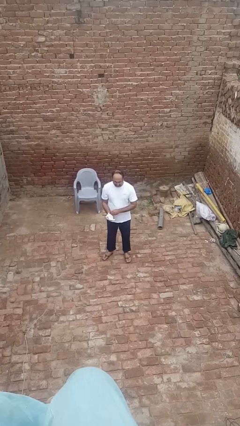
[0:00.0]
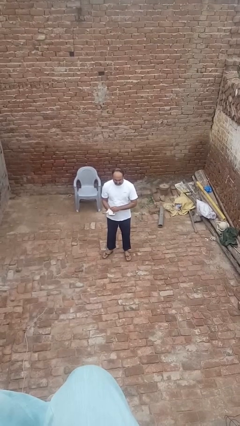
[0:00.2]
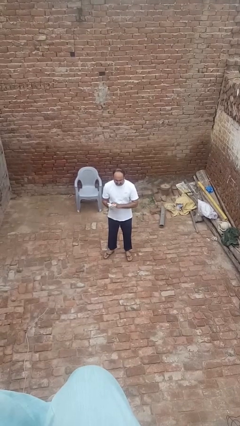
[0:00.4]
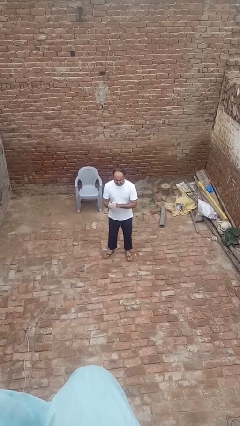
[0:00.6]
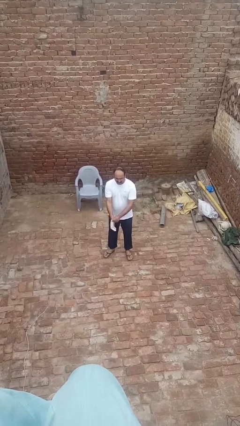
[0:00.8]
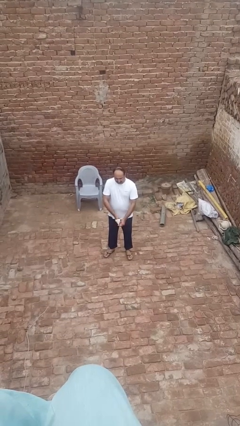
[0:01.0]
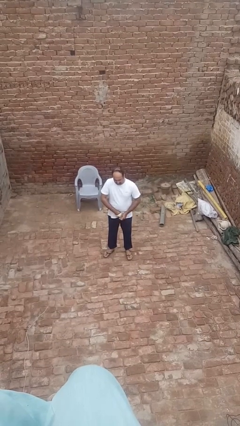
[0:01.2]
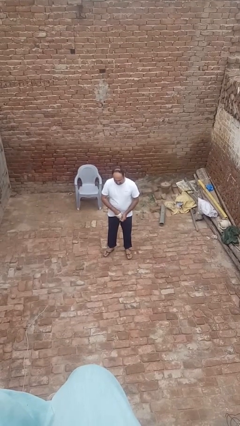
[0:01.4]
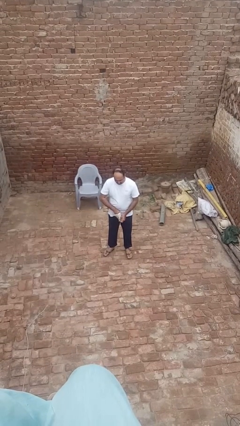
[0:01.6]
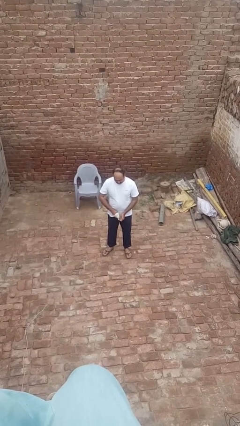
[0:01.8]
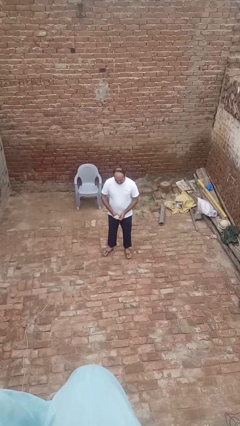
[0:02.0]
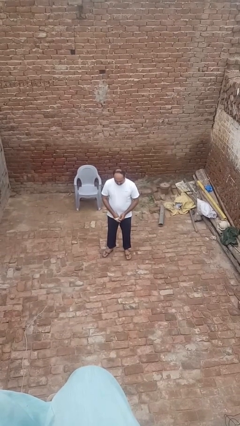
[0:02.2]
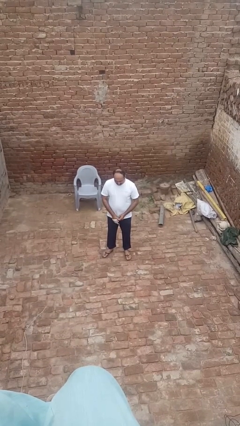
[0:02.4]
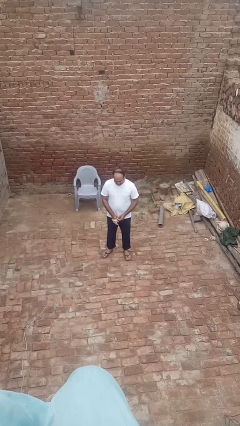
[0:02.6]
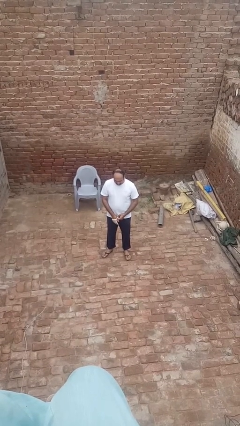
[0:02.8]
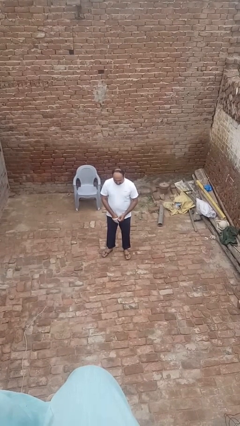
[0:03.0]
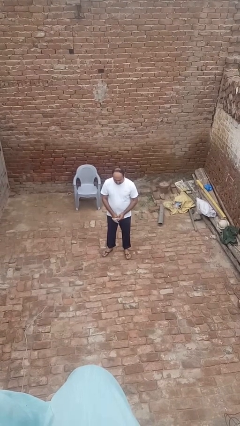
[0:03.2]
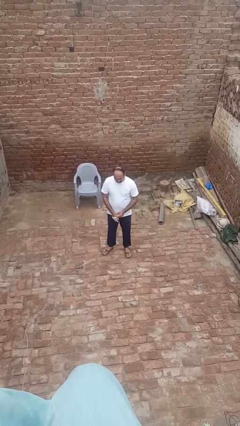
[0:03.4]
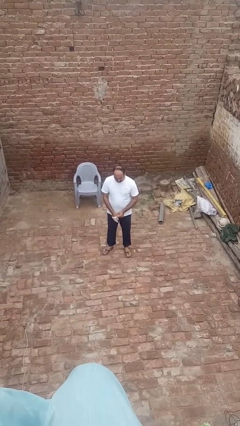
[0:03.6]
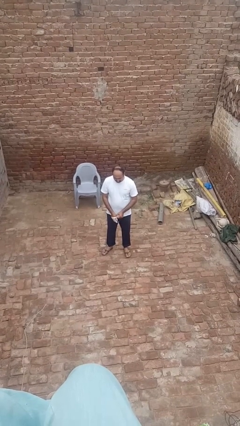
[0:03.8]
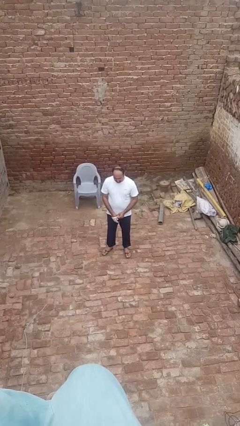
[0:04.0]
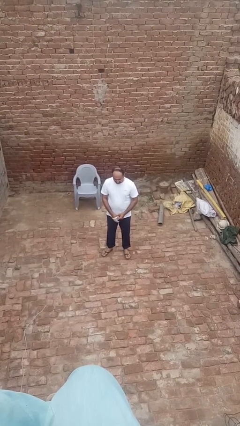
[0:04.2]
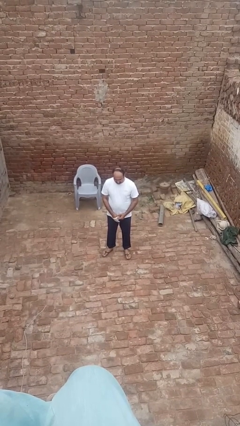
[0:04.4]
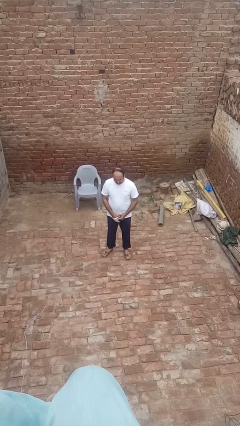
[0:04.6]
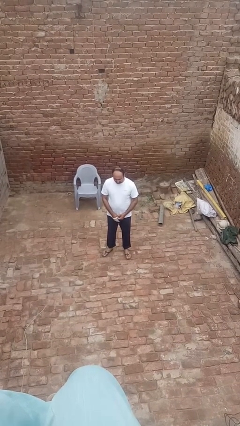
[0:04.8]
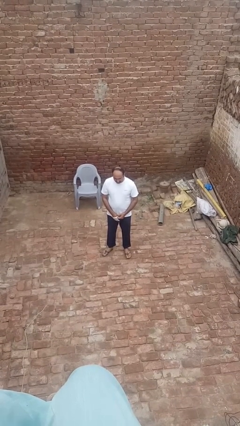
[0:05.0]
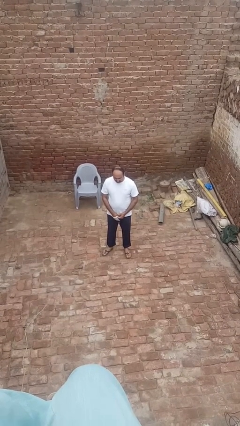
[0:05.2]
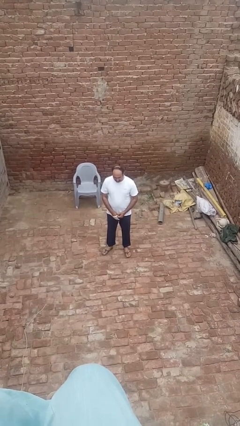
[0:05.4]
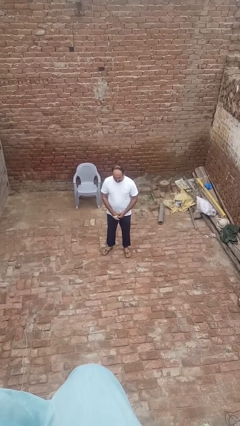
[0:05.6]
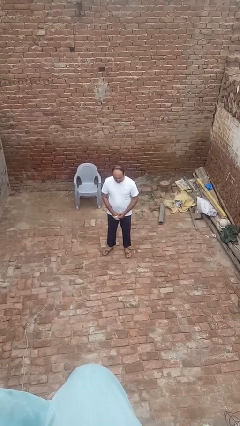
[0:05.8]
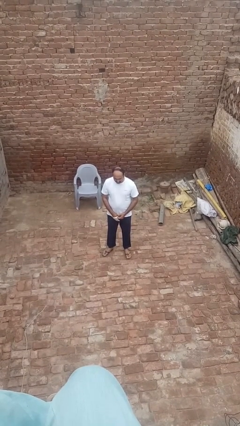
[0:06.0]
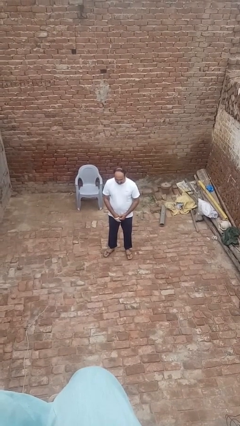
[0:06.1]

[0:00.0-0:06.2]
person takes off gloves

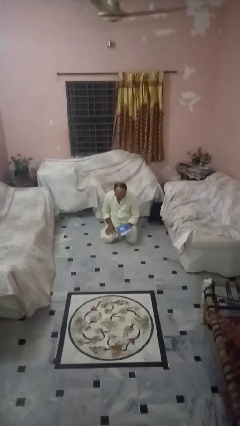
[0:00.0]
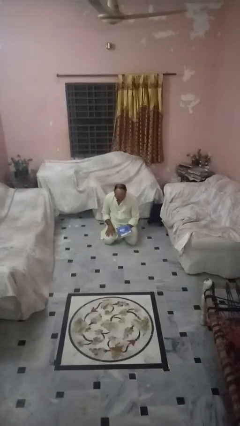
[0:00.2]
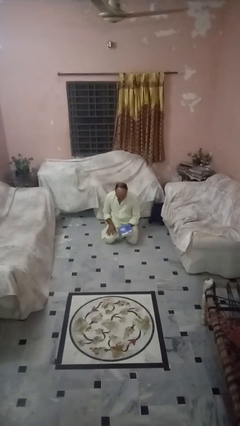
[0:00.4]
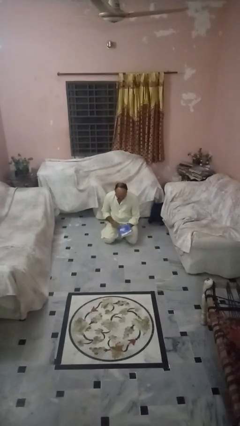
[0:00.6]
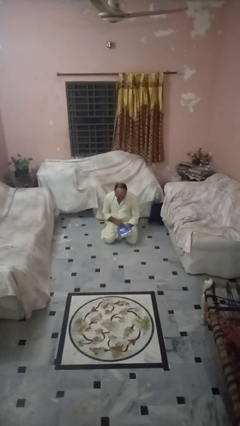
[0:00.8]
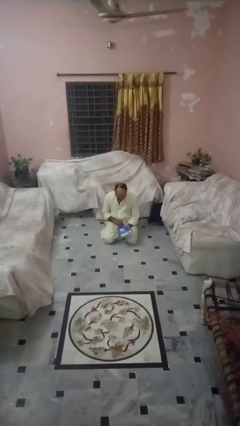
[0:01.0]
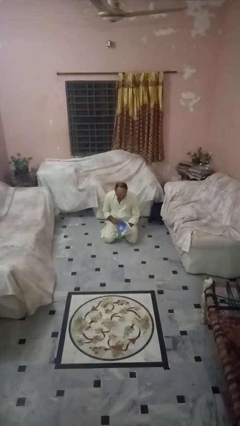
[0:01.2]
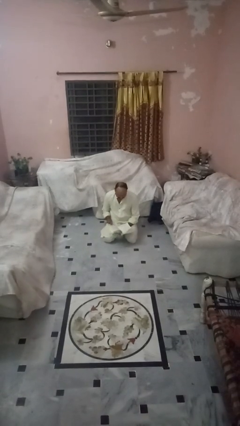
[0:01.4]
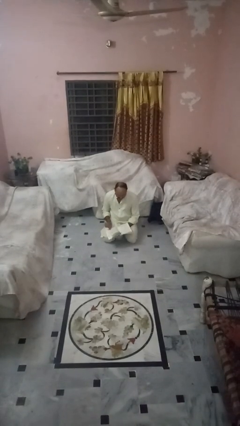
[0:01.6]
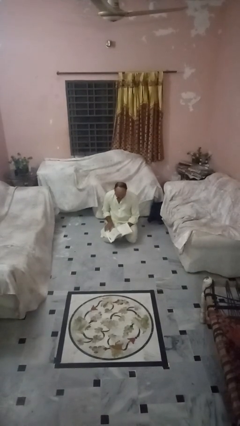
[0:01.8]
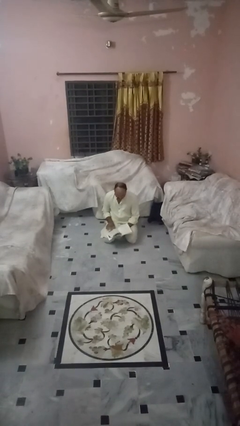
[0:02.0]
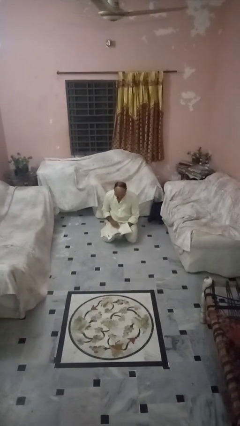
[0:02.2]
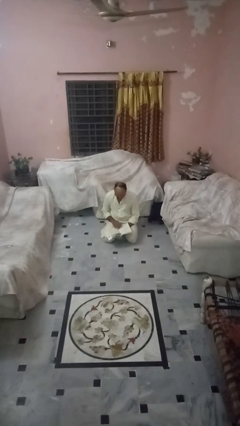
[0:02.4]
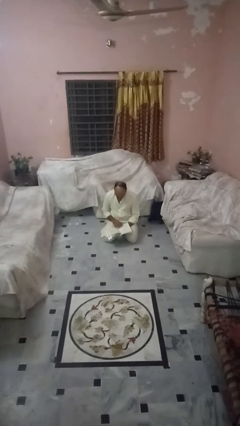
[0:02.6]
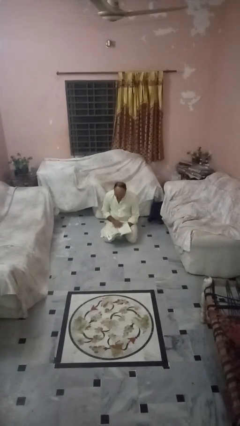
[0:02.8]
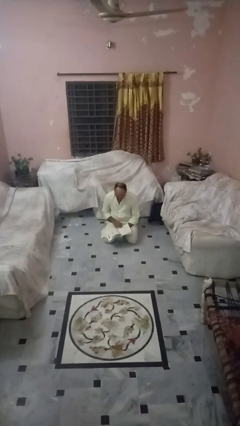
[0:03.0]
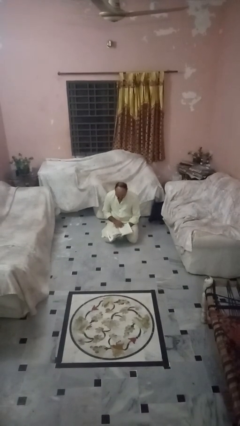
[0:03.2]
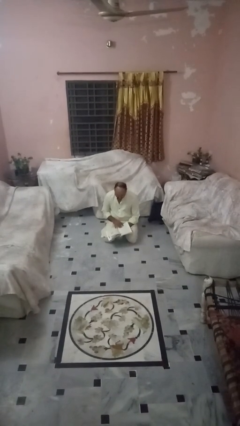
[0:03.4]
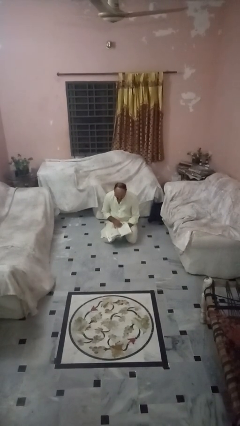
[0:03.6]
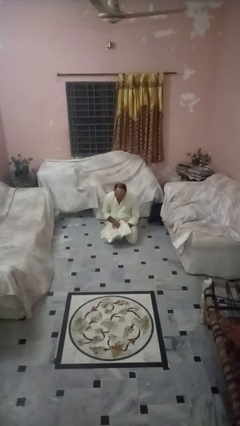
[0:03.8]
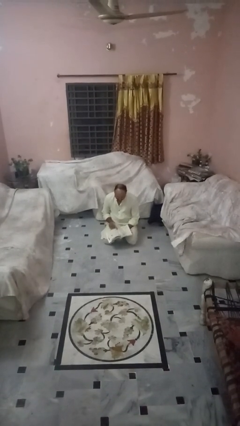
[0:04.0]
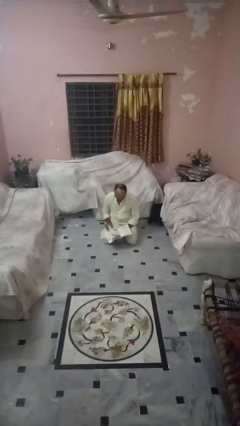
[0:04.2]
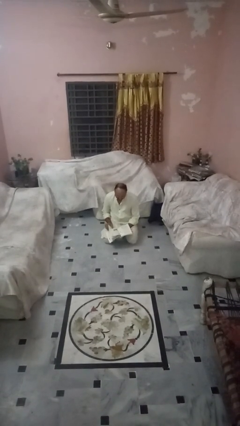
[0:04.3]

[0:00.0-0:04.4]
person reads book

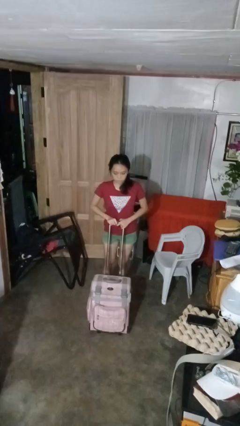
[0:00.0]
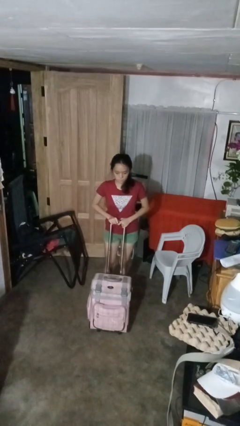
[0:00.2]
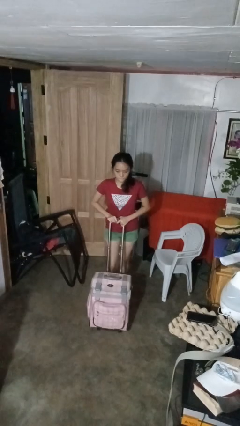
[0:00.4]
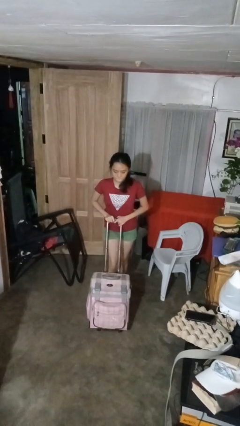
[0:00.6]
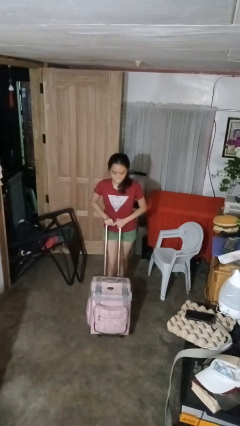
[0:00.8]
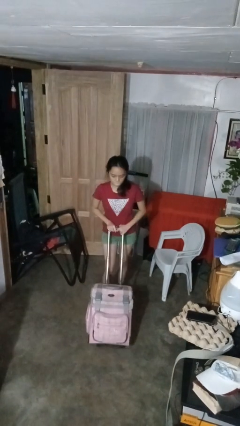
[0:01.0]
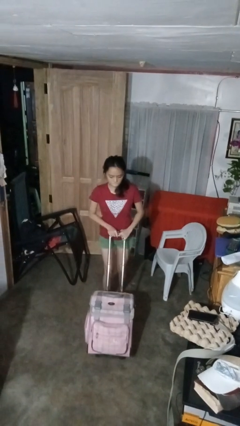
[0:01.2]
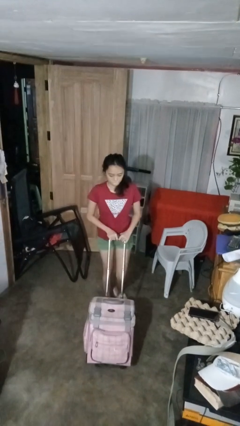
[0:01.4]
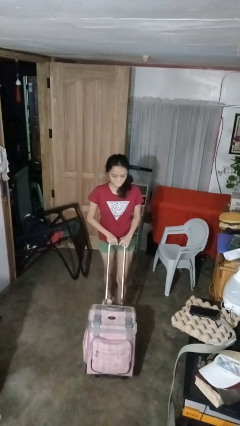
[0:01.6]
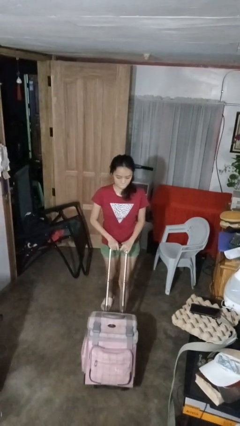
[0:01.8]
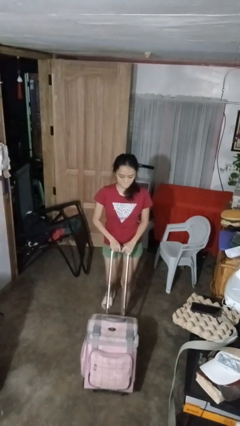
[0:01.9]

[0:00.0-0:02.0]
person pushes wheeled cart

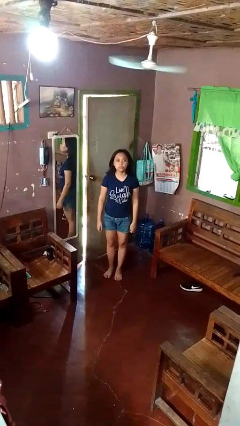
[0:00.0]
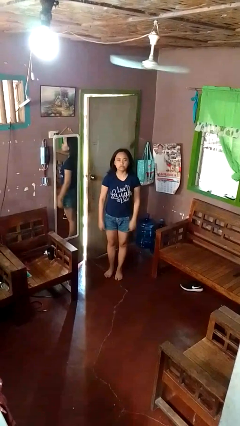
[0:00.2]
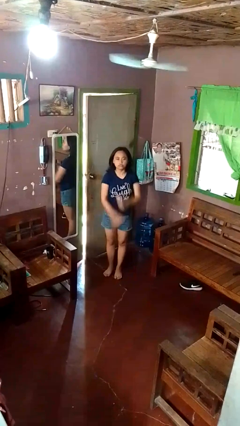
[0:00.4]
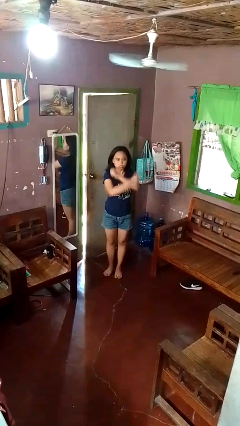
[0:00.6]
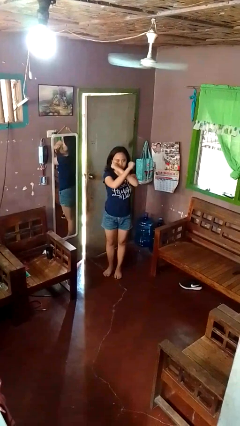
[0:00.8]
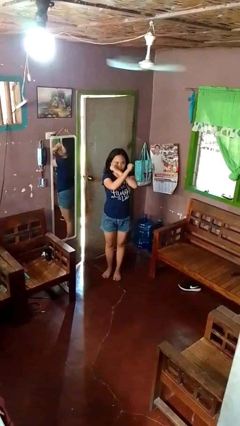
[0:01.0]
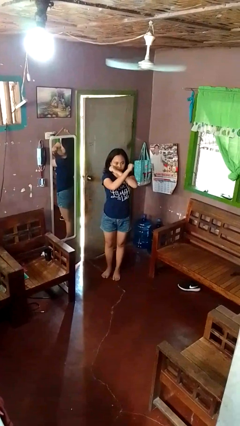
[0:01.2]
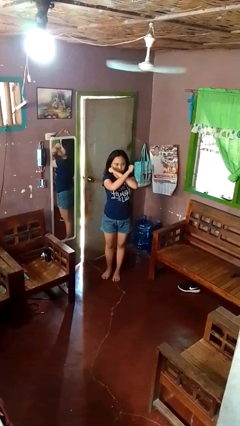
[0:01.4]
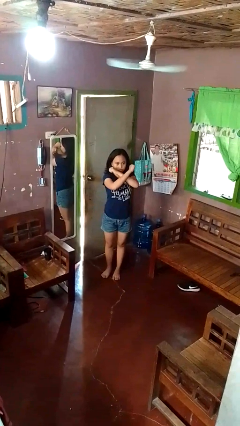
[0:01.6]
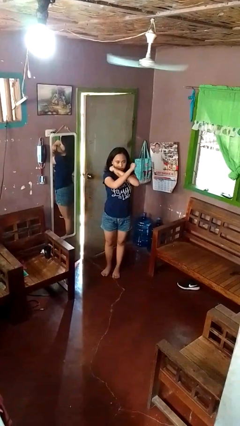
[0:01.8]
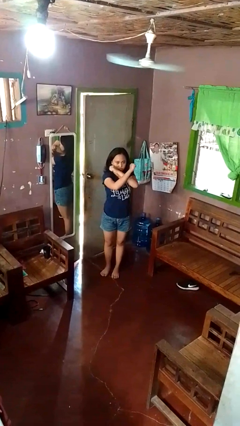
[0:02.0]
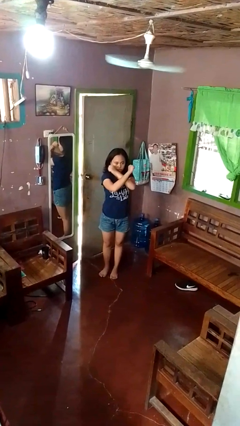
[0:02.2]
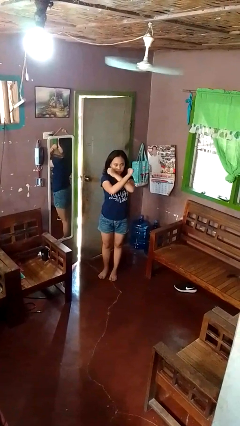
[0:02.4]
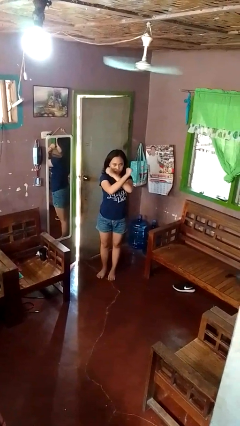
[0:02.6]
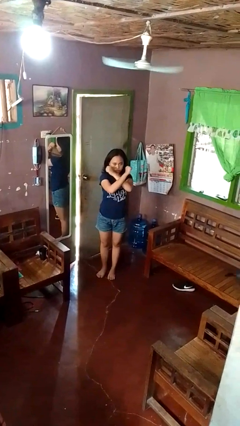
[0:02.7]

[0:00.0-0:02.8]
person gestures arms x

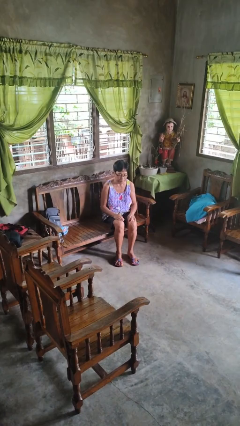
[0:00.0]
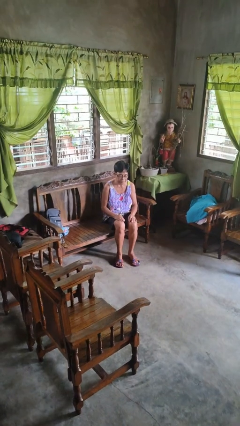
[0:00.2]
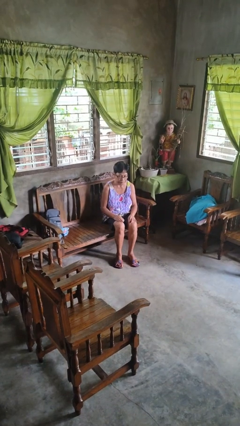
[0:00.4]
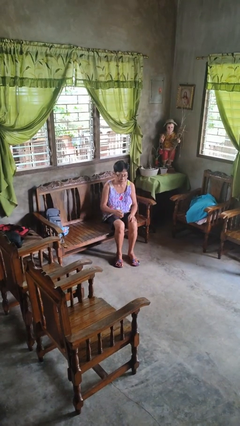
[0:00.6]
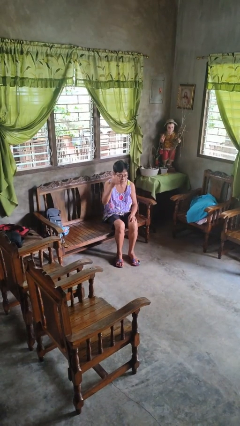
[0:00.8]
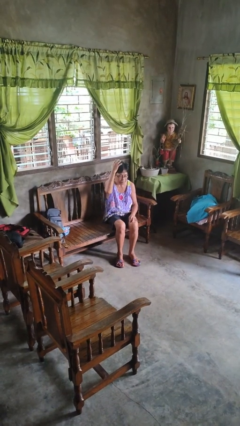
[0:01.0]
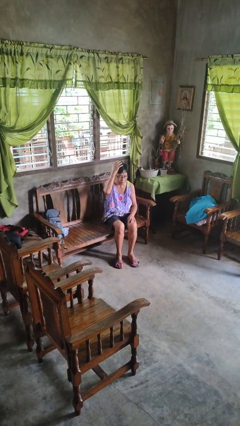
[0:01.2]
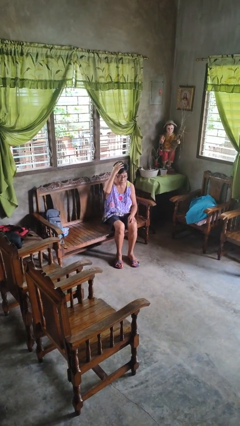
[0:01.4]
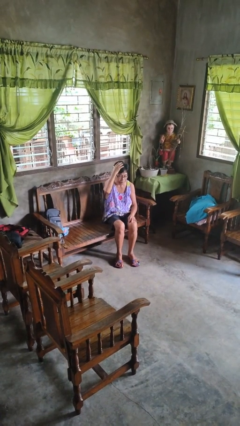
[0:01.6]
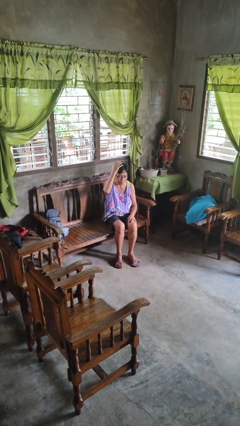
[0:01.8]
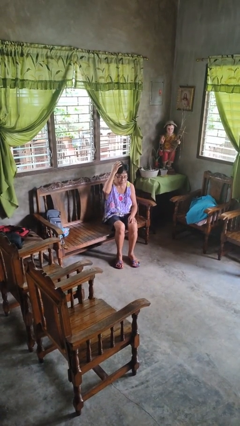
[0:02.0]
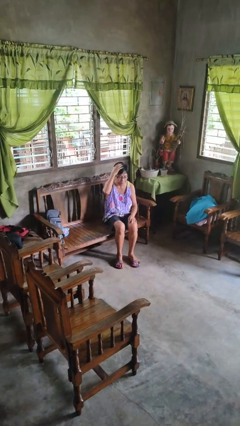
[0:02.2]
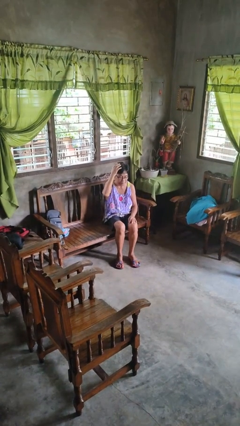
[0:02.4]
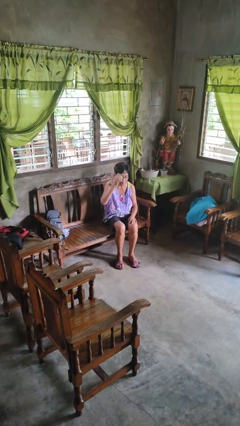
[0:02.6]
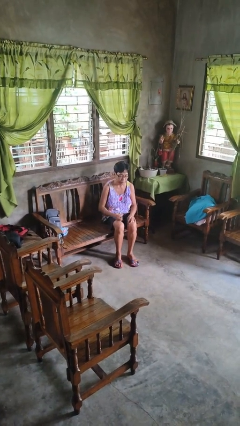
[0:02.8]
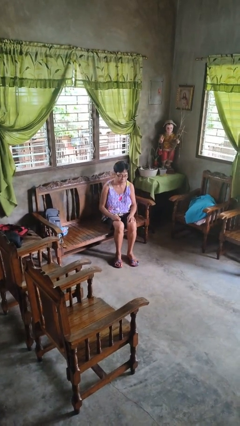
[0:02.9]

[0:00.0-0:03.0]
person pats head
